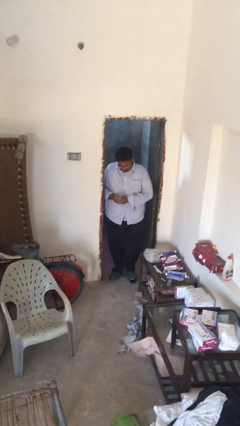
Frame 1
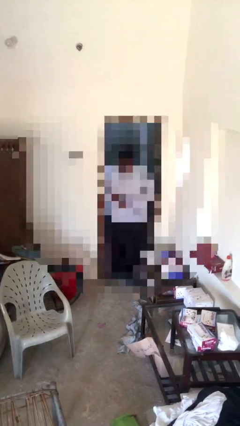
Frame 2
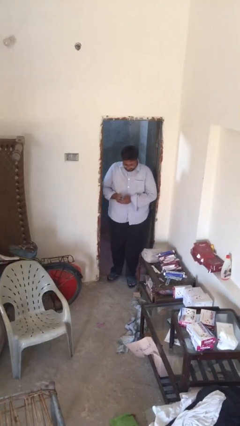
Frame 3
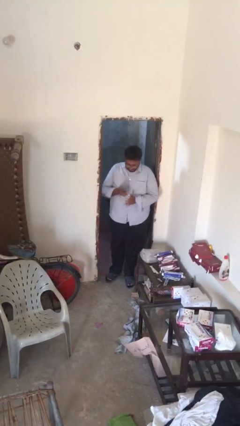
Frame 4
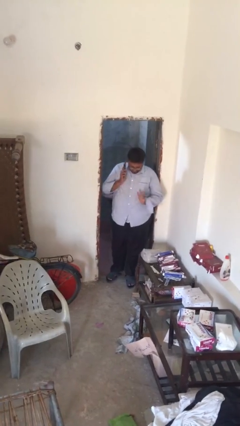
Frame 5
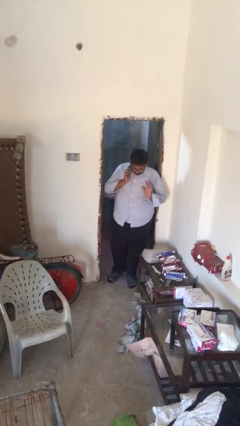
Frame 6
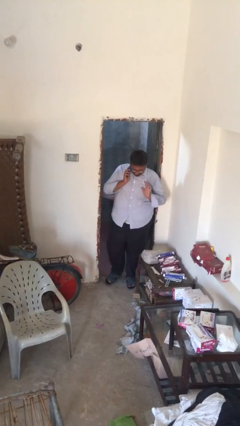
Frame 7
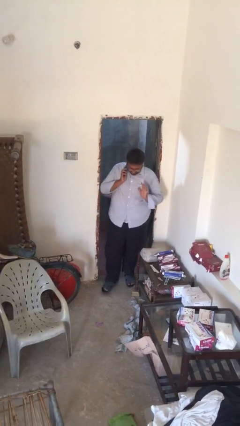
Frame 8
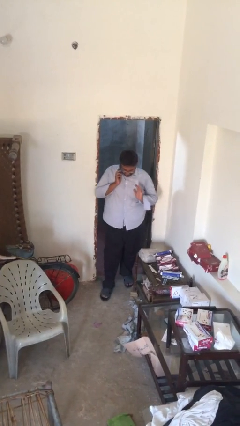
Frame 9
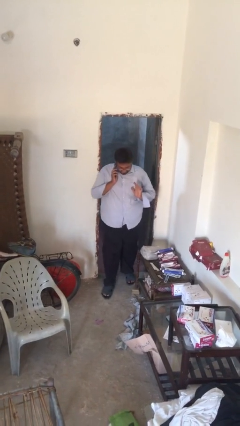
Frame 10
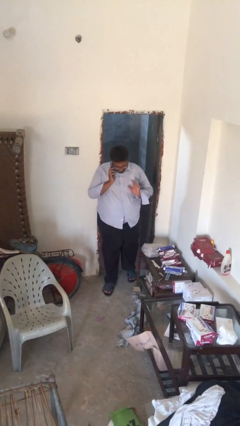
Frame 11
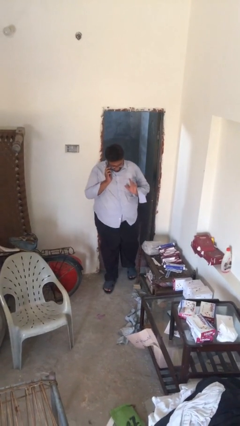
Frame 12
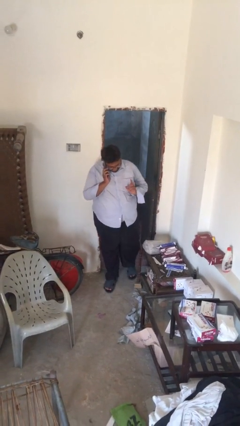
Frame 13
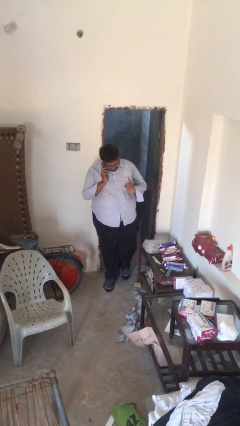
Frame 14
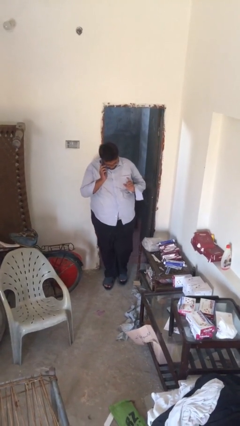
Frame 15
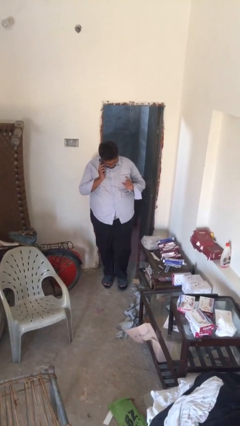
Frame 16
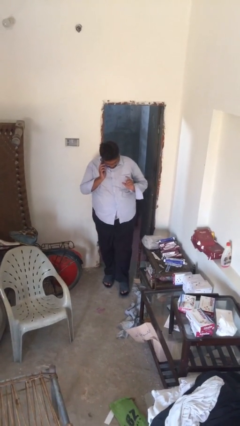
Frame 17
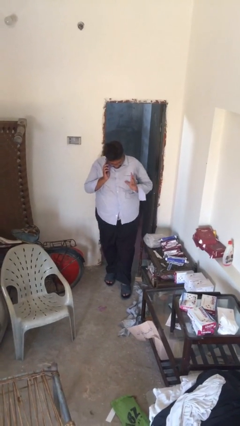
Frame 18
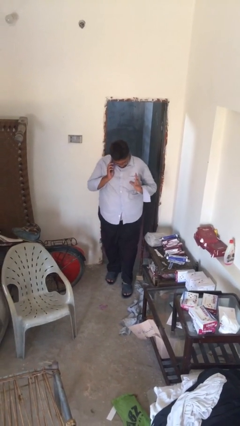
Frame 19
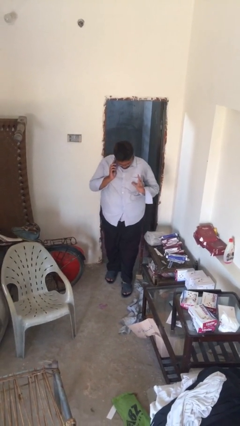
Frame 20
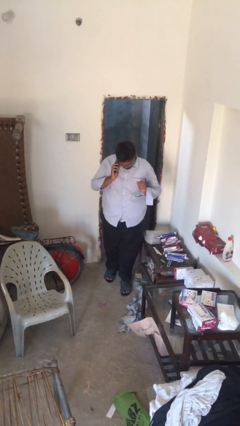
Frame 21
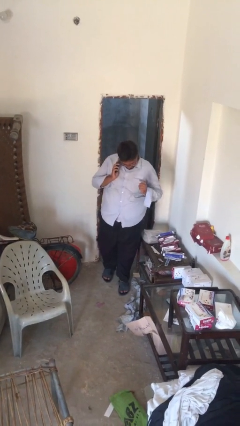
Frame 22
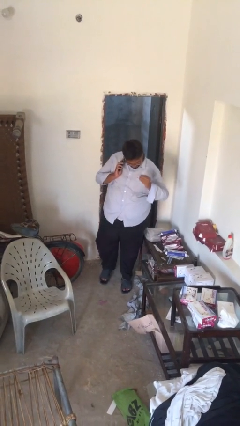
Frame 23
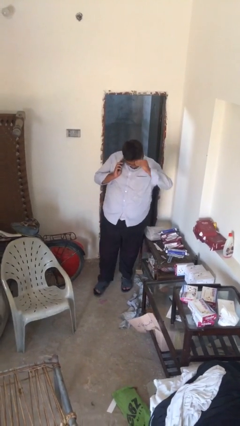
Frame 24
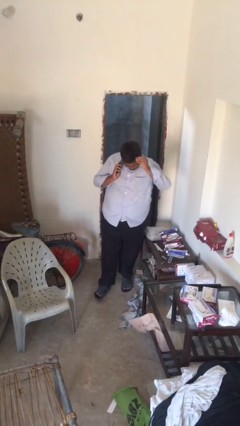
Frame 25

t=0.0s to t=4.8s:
person talks on phone

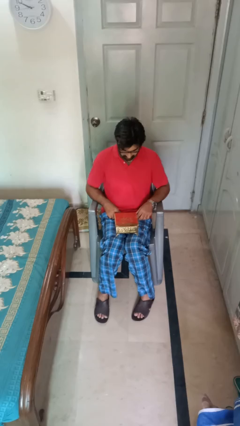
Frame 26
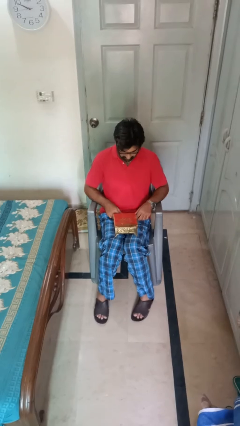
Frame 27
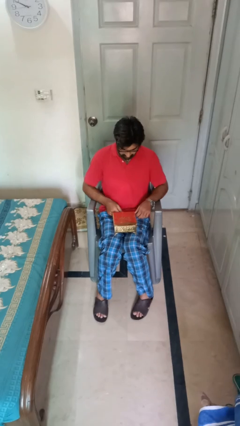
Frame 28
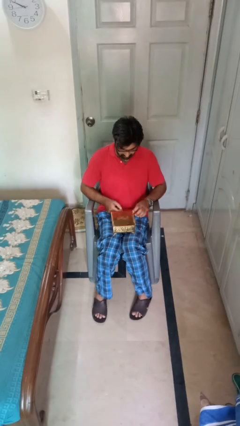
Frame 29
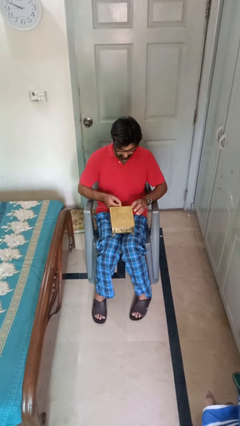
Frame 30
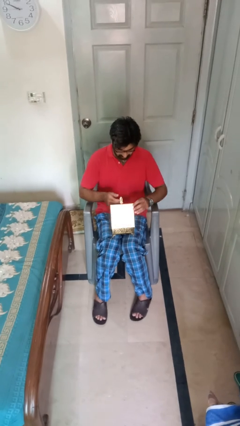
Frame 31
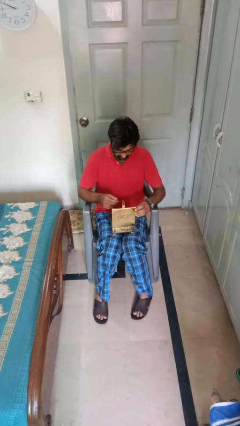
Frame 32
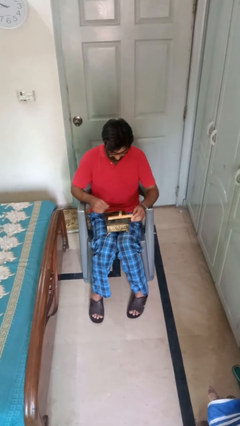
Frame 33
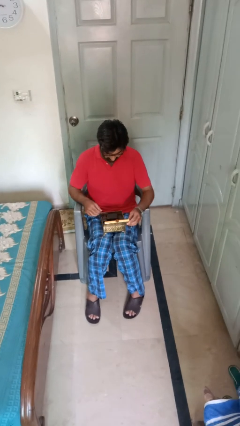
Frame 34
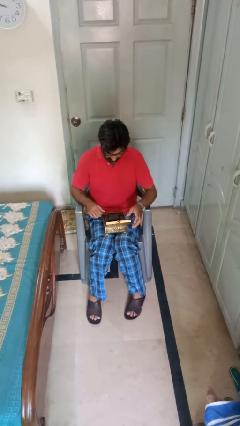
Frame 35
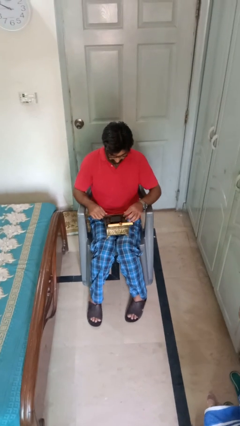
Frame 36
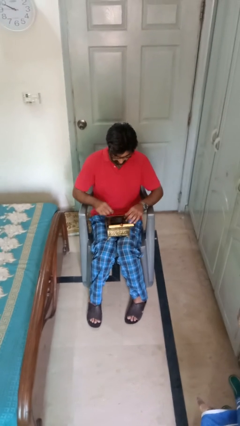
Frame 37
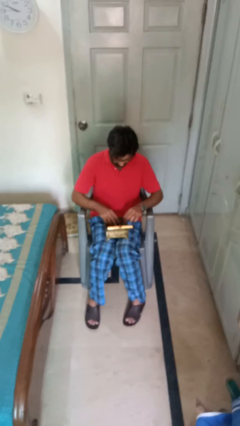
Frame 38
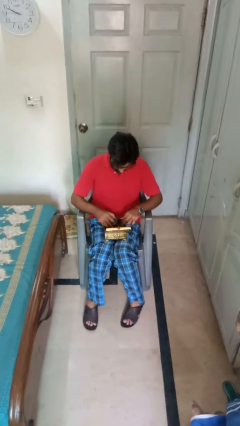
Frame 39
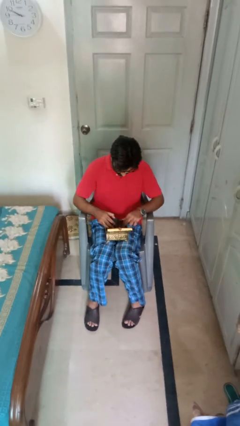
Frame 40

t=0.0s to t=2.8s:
person opens jewelry box

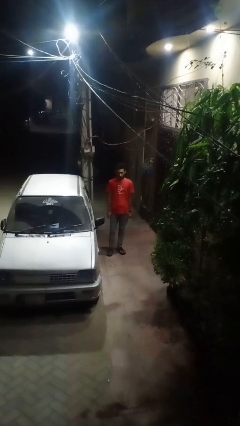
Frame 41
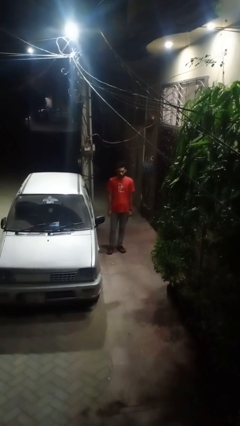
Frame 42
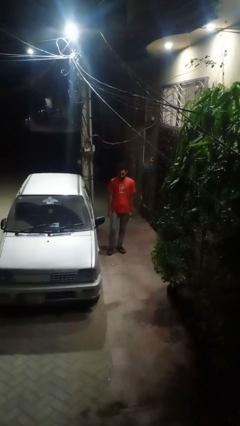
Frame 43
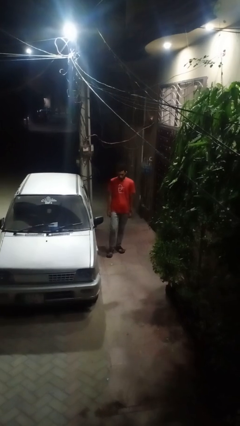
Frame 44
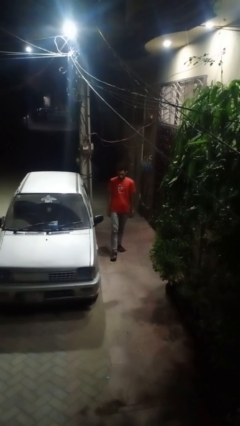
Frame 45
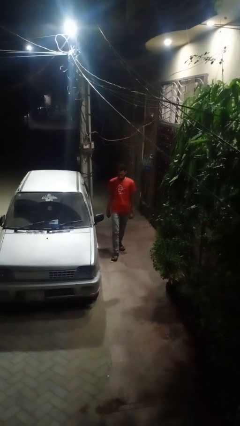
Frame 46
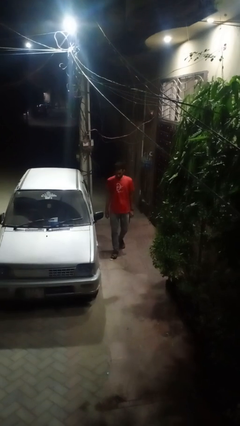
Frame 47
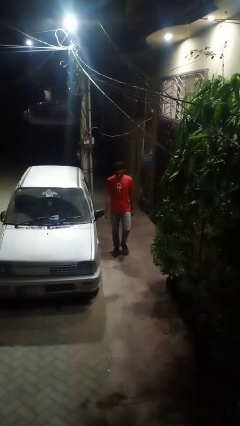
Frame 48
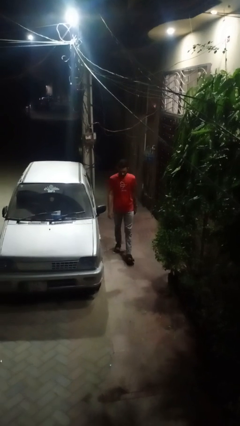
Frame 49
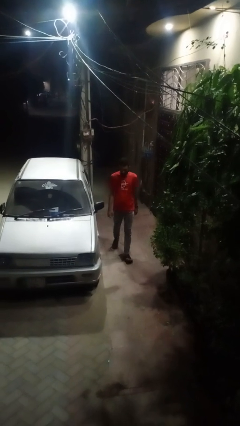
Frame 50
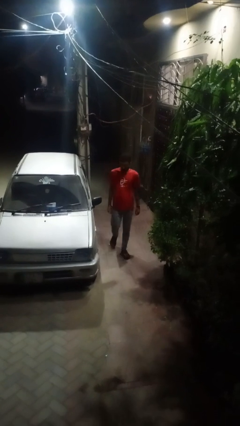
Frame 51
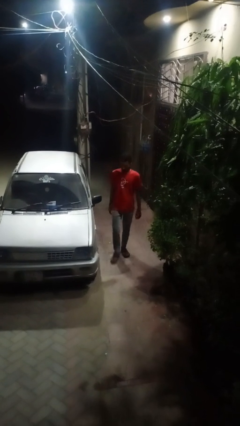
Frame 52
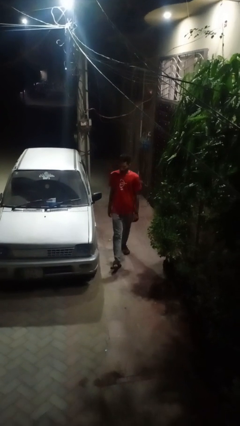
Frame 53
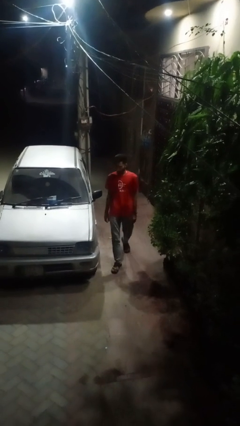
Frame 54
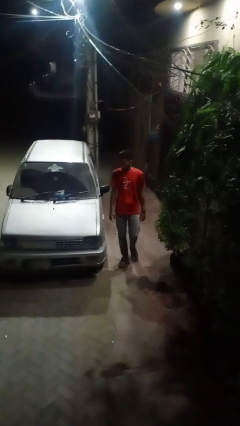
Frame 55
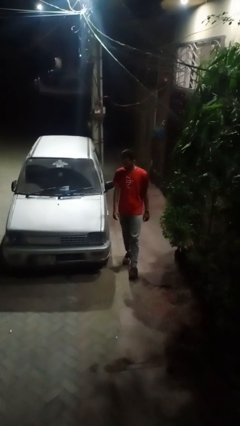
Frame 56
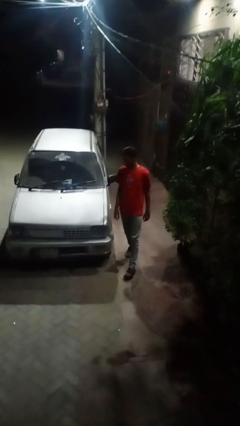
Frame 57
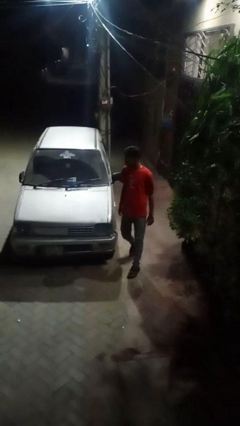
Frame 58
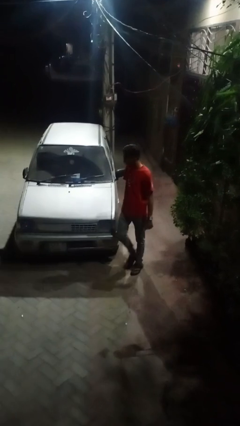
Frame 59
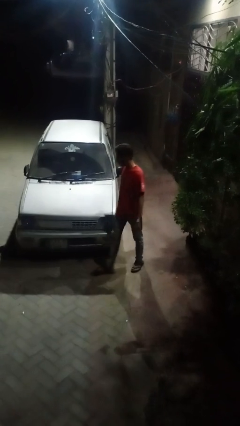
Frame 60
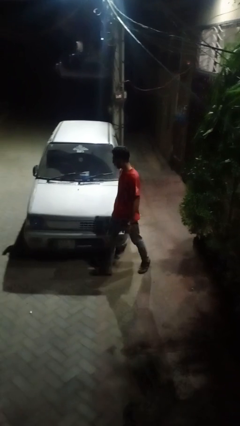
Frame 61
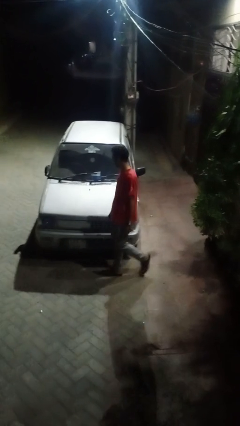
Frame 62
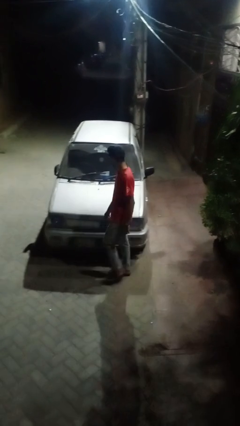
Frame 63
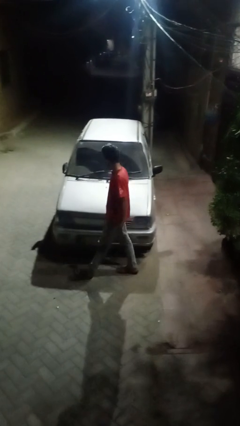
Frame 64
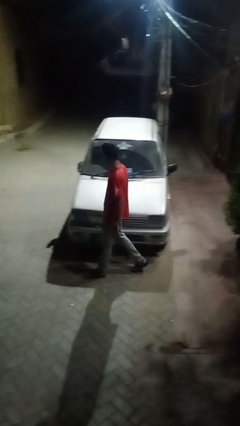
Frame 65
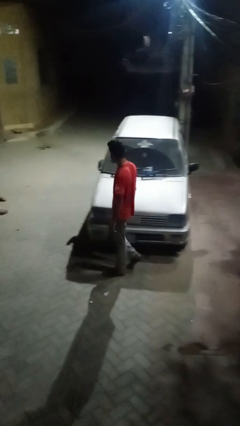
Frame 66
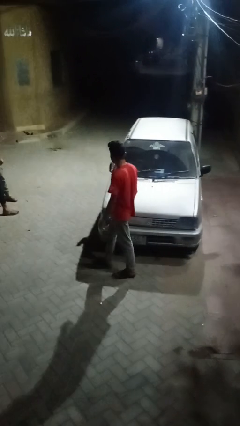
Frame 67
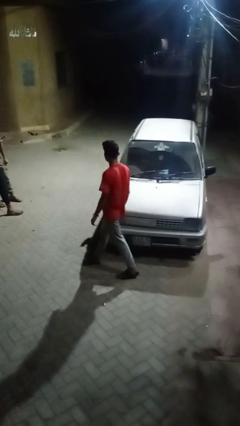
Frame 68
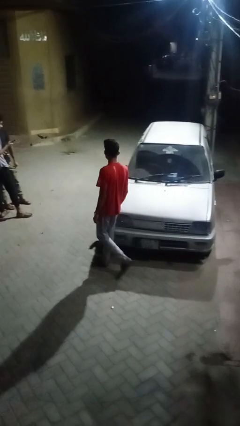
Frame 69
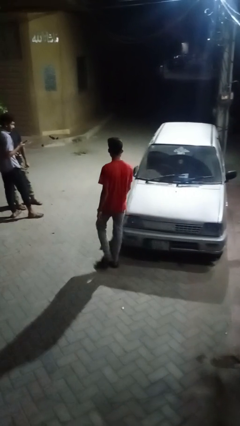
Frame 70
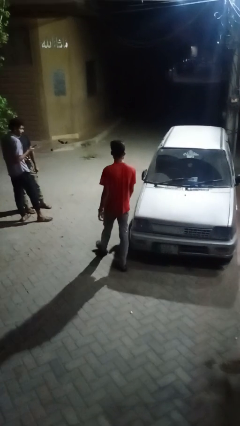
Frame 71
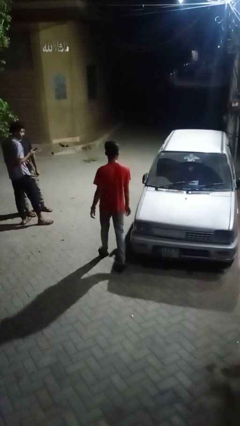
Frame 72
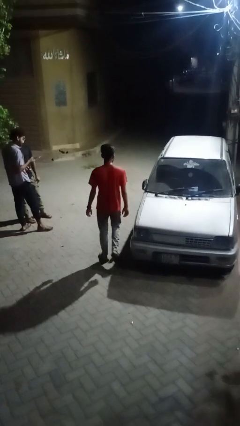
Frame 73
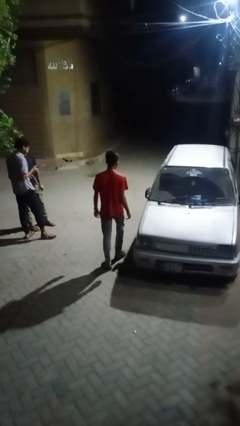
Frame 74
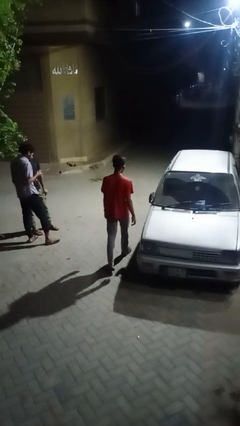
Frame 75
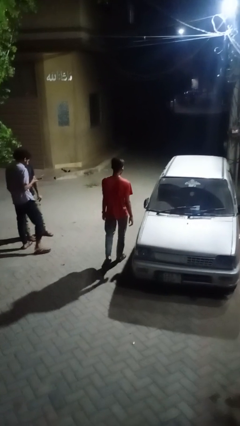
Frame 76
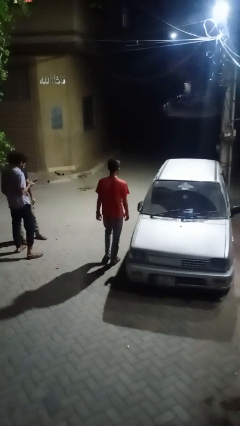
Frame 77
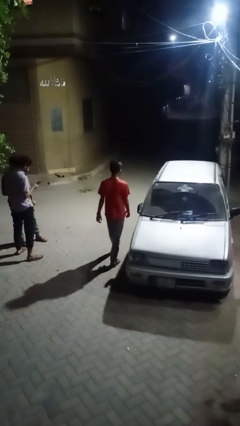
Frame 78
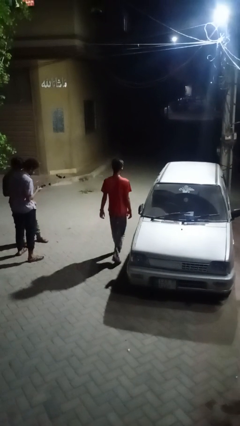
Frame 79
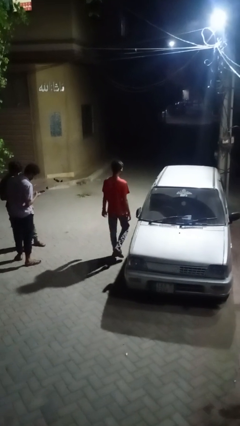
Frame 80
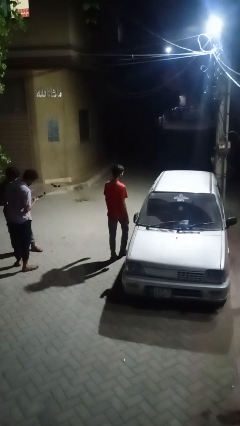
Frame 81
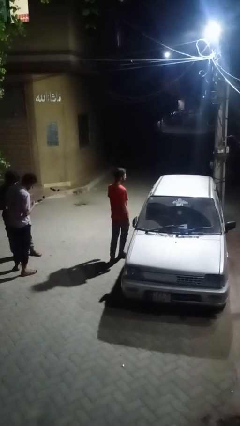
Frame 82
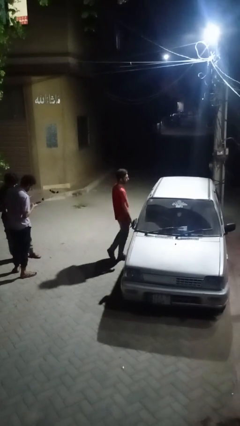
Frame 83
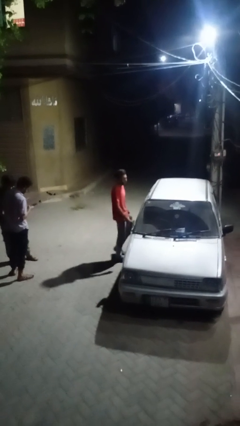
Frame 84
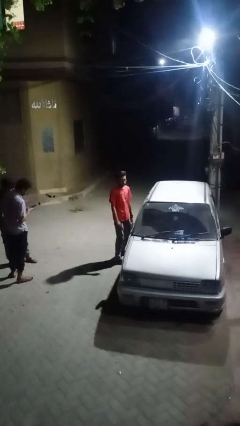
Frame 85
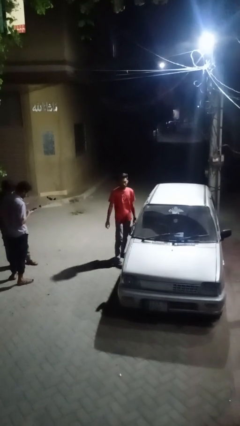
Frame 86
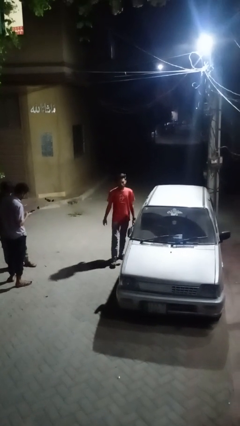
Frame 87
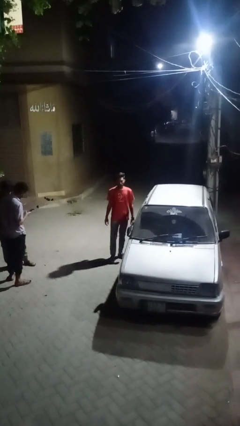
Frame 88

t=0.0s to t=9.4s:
person walks around car

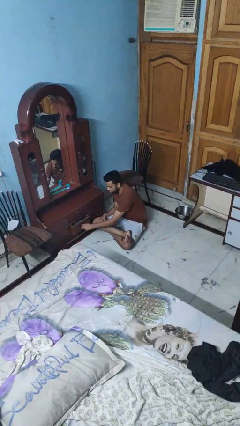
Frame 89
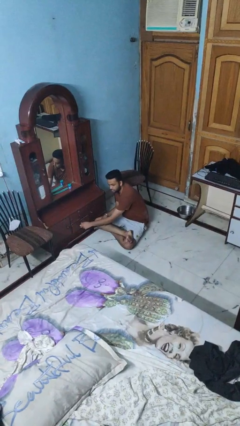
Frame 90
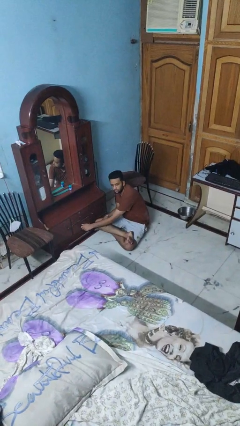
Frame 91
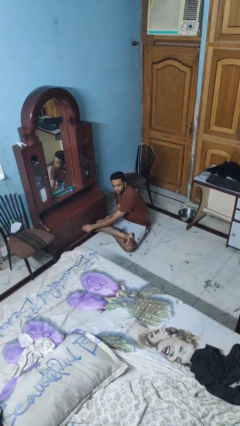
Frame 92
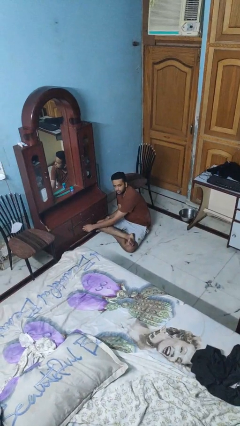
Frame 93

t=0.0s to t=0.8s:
person closes dresser drawer

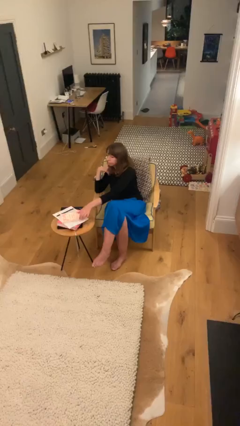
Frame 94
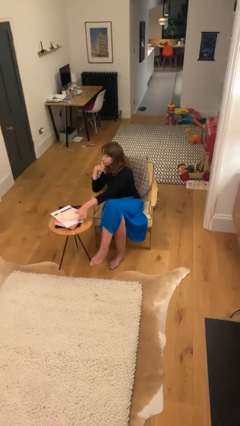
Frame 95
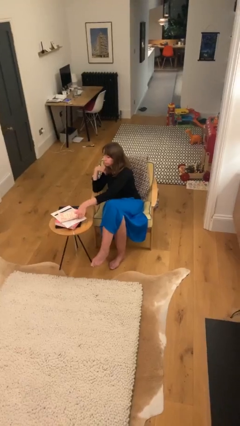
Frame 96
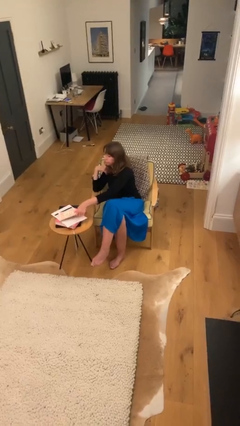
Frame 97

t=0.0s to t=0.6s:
person picks up object from table
